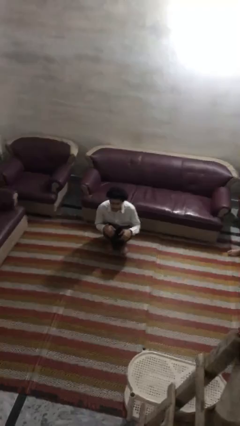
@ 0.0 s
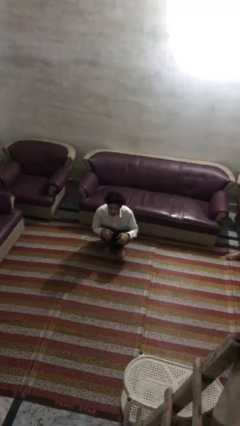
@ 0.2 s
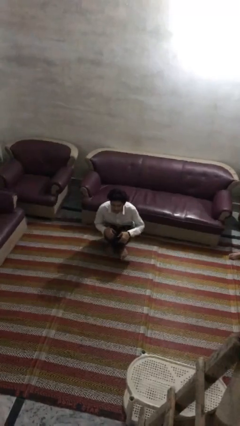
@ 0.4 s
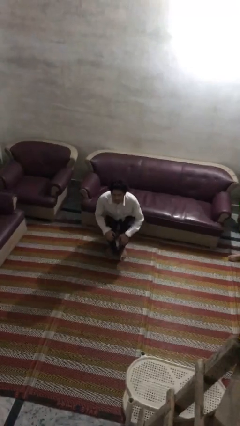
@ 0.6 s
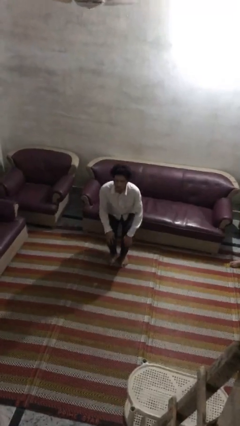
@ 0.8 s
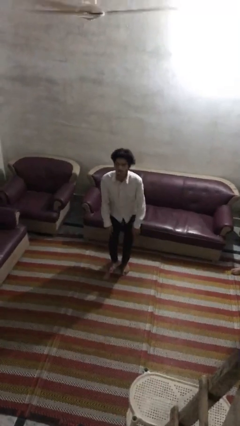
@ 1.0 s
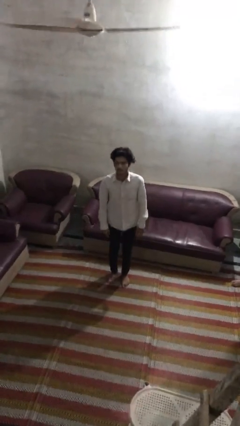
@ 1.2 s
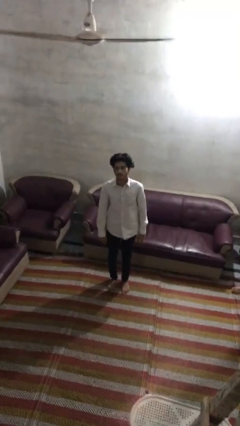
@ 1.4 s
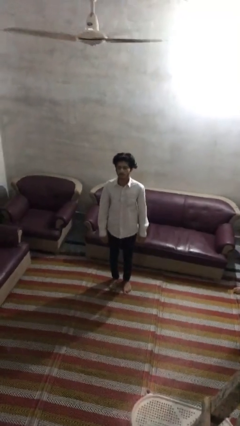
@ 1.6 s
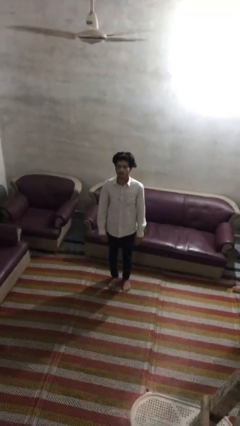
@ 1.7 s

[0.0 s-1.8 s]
person stands up

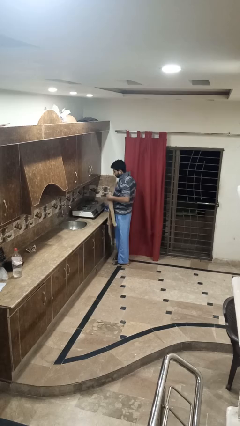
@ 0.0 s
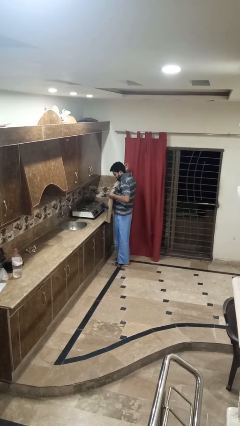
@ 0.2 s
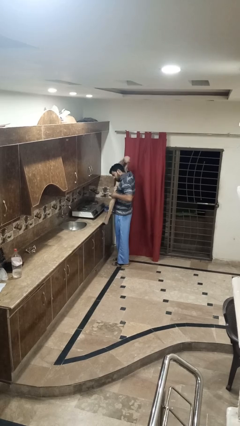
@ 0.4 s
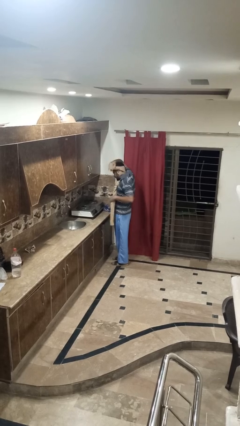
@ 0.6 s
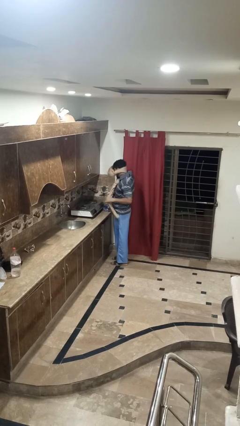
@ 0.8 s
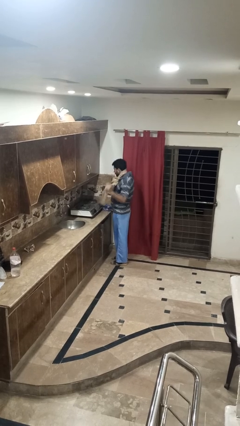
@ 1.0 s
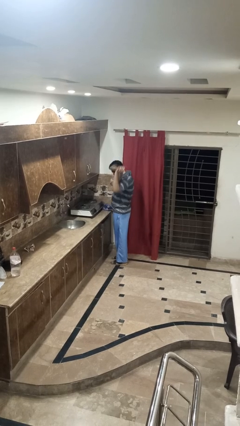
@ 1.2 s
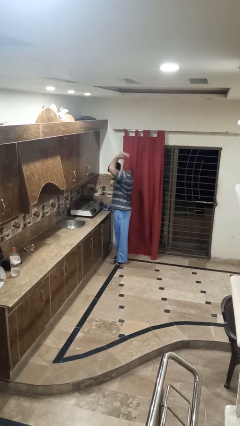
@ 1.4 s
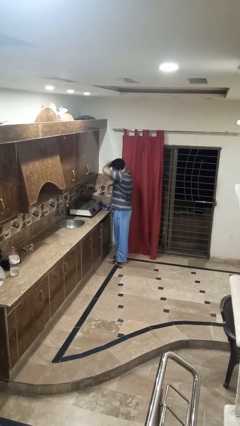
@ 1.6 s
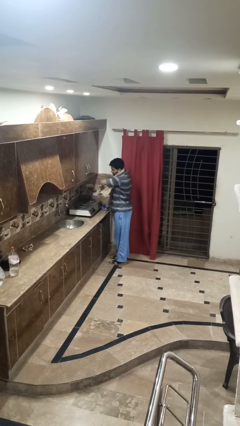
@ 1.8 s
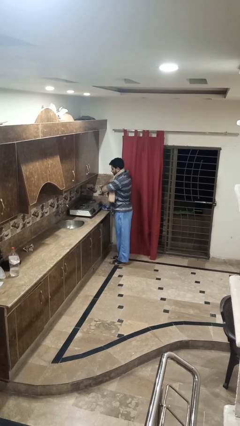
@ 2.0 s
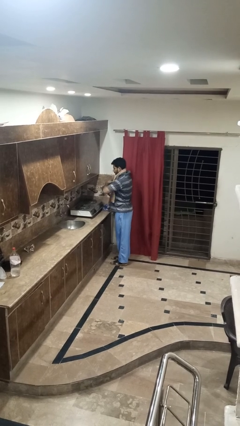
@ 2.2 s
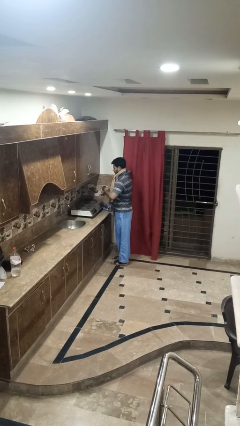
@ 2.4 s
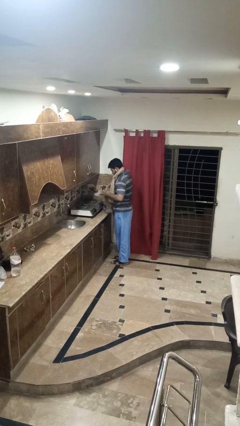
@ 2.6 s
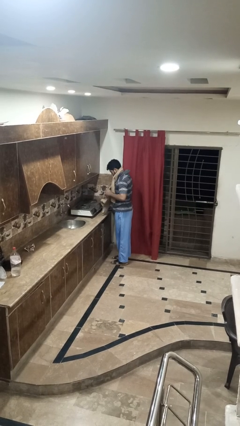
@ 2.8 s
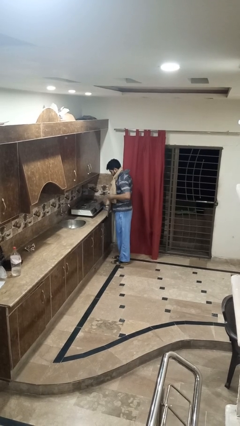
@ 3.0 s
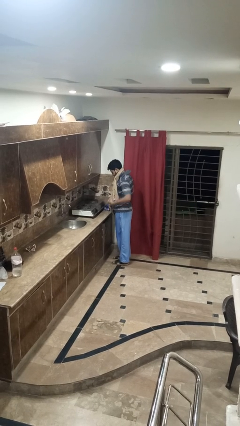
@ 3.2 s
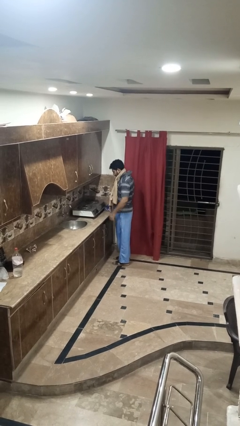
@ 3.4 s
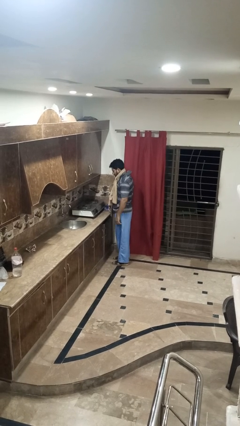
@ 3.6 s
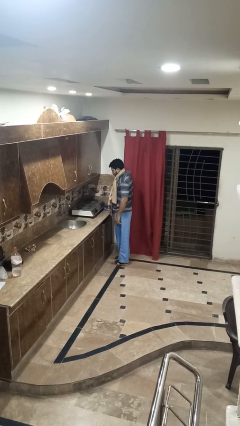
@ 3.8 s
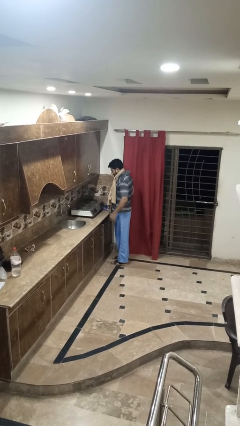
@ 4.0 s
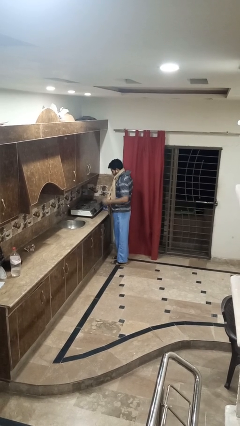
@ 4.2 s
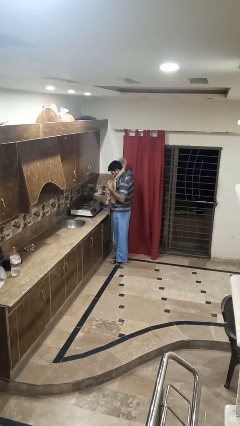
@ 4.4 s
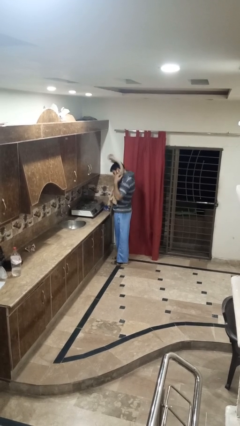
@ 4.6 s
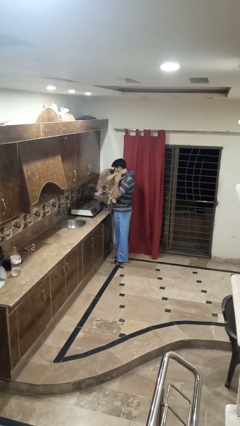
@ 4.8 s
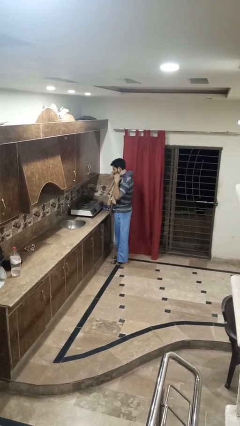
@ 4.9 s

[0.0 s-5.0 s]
person puts on apron

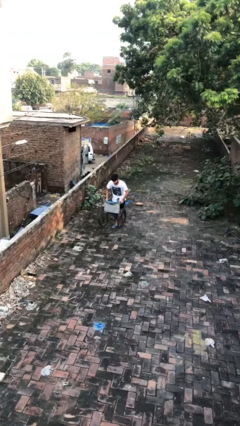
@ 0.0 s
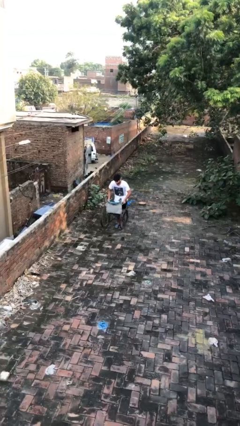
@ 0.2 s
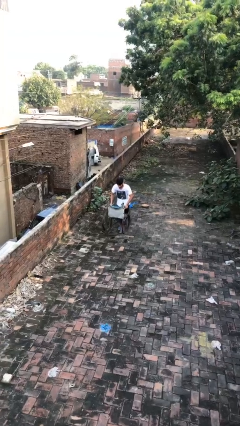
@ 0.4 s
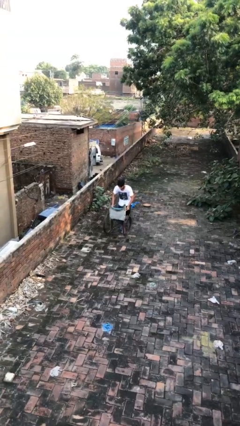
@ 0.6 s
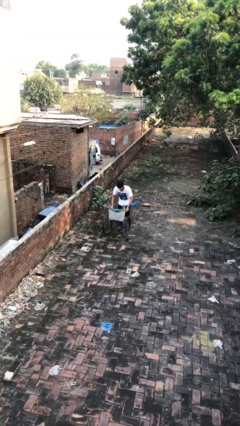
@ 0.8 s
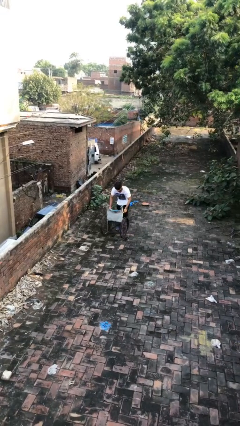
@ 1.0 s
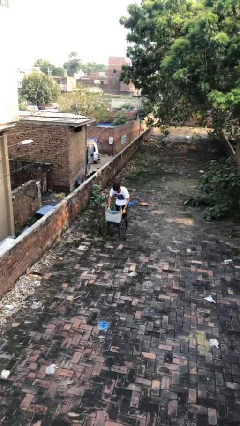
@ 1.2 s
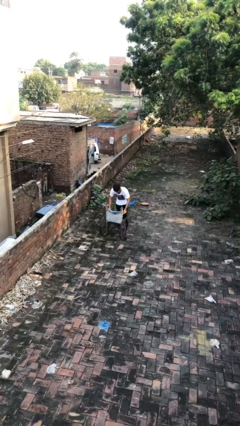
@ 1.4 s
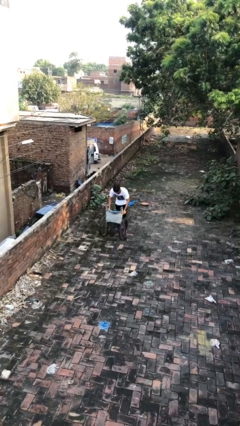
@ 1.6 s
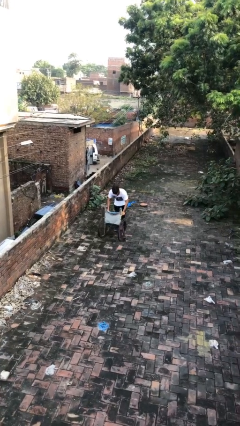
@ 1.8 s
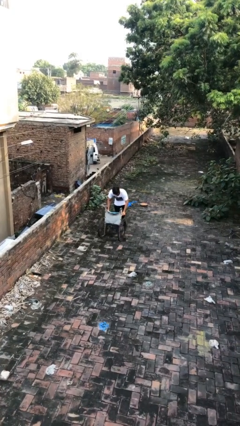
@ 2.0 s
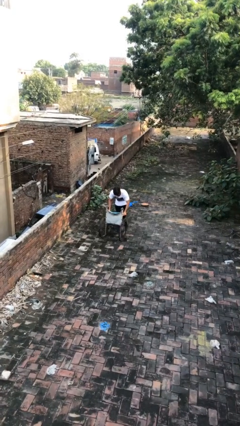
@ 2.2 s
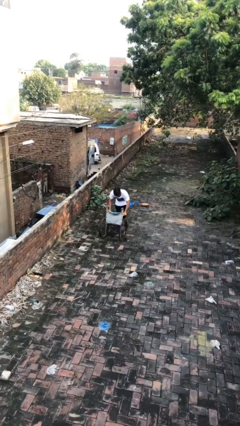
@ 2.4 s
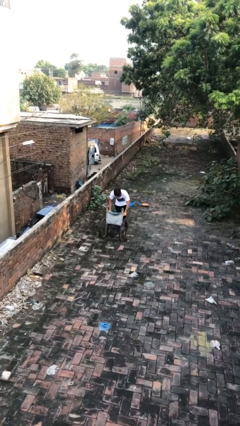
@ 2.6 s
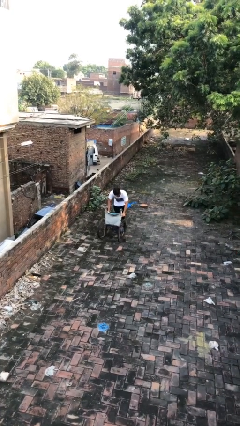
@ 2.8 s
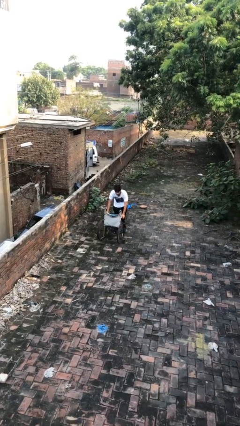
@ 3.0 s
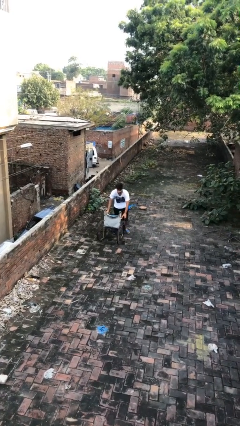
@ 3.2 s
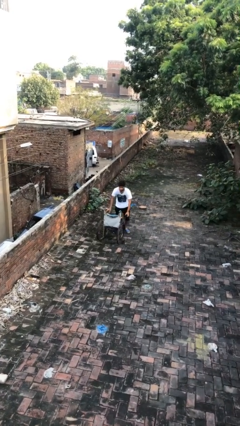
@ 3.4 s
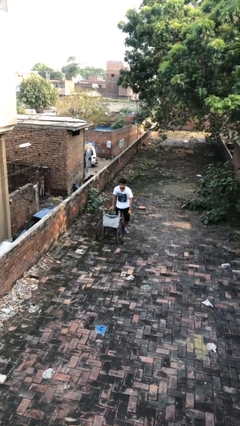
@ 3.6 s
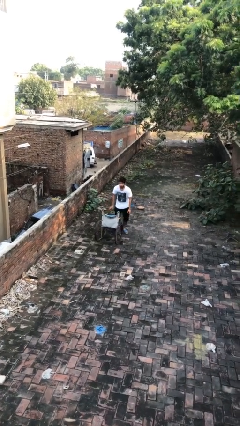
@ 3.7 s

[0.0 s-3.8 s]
person puts down object on floor

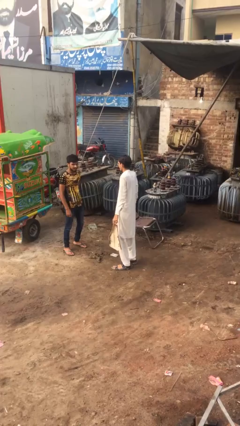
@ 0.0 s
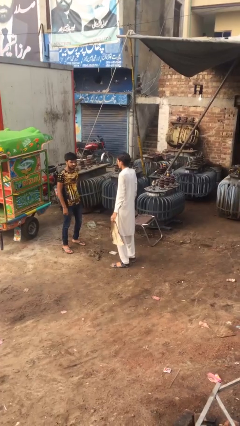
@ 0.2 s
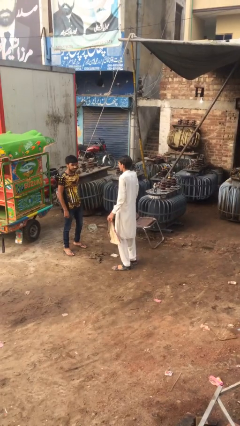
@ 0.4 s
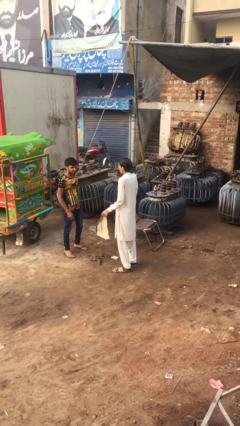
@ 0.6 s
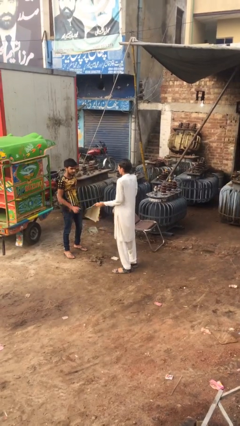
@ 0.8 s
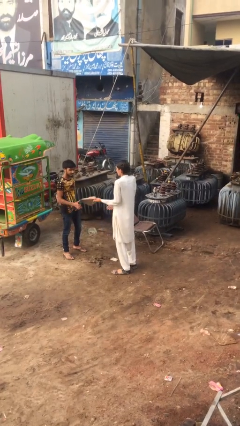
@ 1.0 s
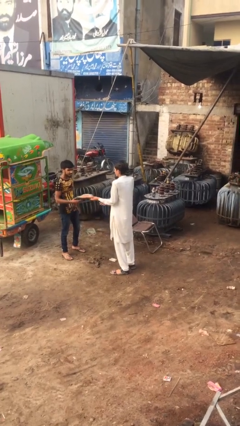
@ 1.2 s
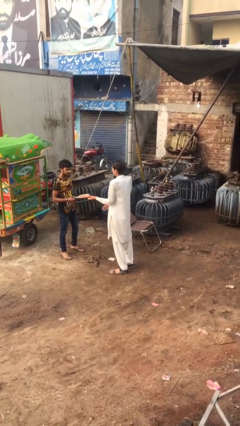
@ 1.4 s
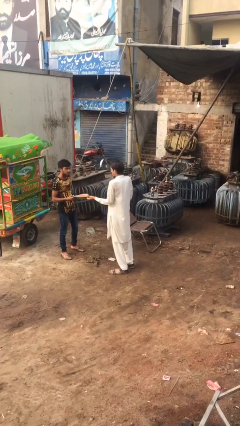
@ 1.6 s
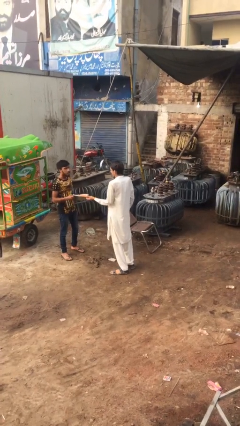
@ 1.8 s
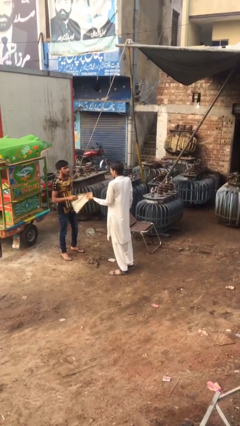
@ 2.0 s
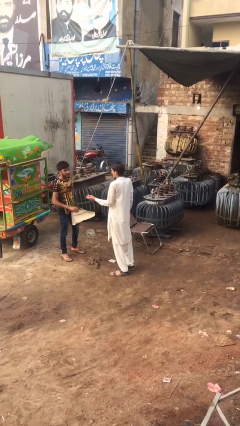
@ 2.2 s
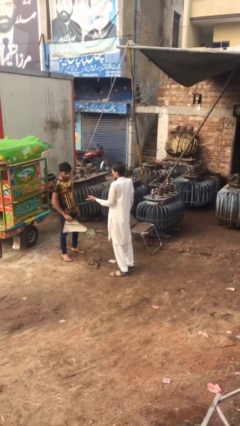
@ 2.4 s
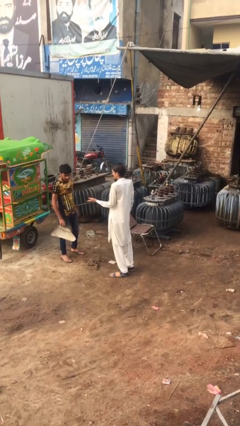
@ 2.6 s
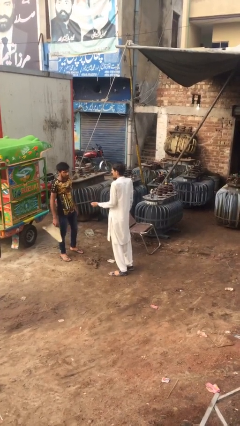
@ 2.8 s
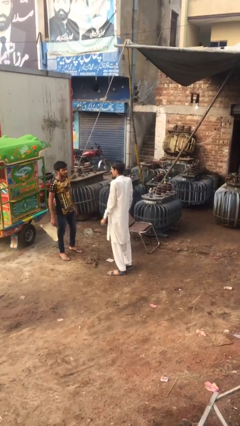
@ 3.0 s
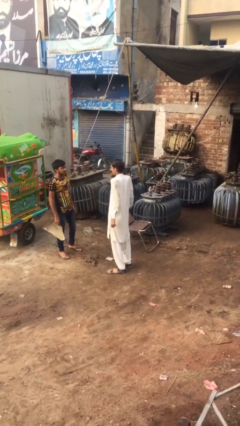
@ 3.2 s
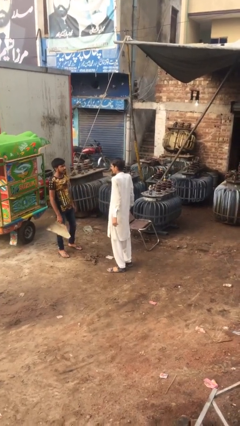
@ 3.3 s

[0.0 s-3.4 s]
person transfers object to person

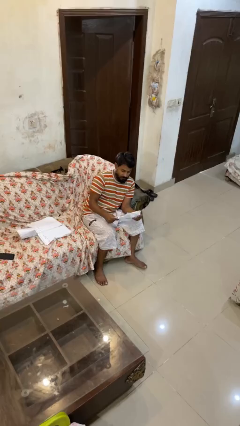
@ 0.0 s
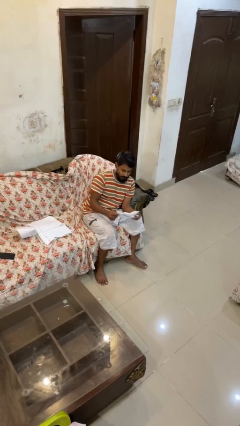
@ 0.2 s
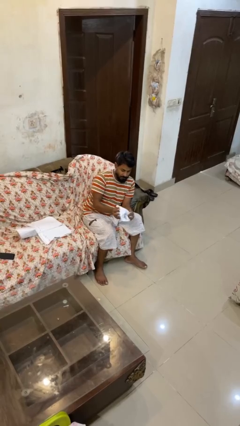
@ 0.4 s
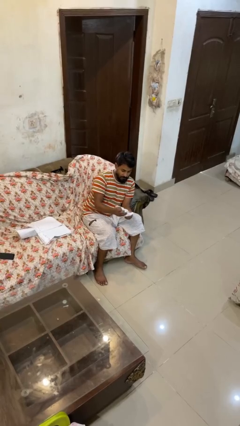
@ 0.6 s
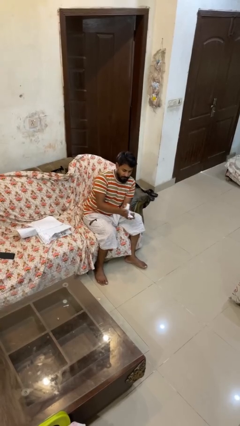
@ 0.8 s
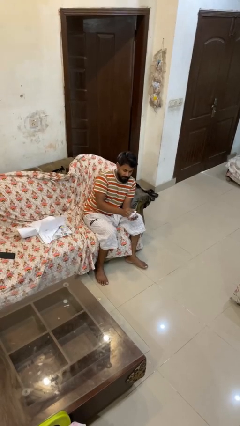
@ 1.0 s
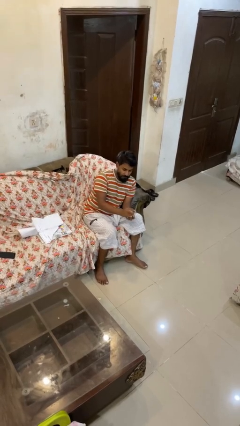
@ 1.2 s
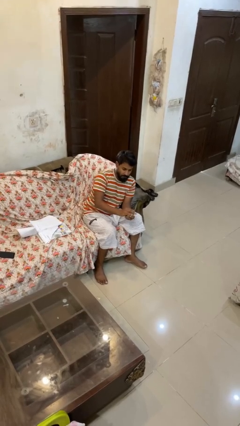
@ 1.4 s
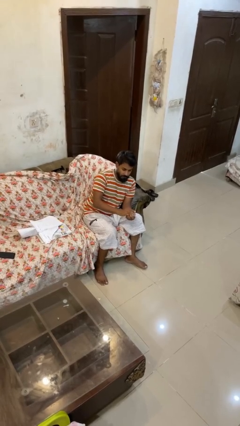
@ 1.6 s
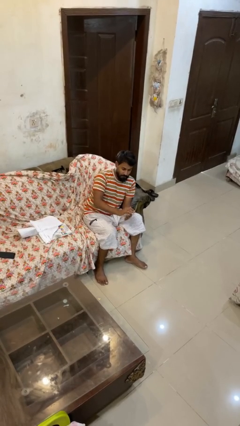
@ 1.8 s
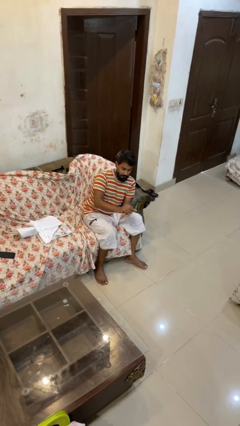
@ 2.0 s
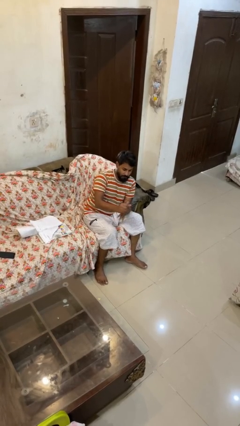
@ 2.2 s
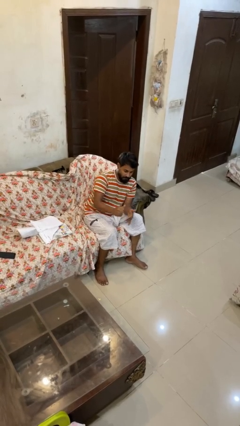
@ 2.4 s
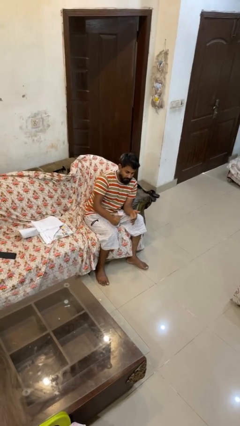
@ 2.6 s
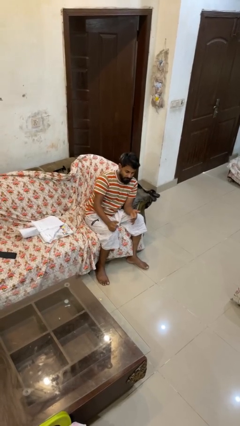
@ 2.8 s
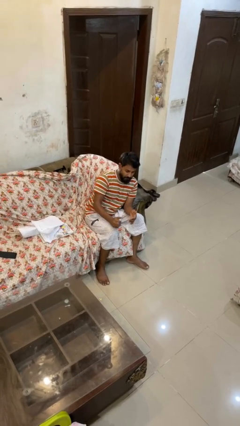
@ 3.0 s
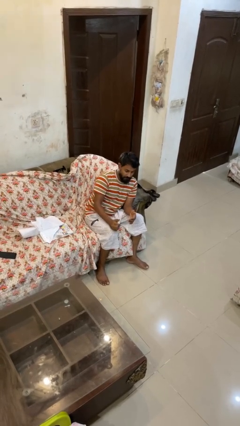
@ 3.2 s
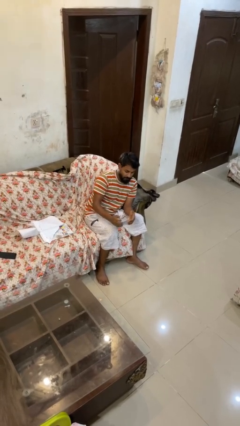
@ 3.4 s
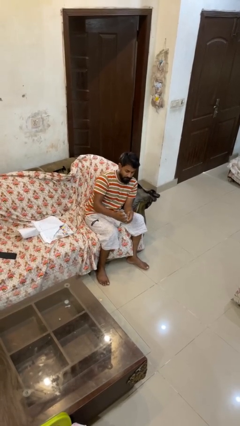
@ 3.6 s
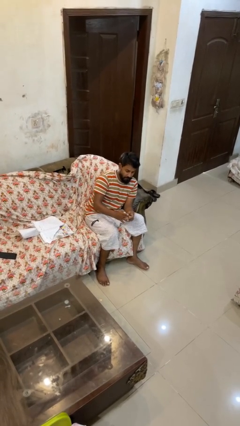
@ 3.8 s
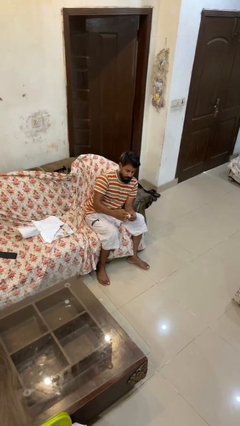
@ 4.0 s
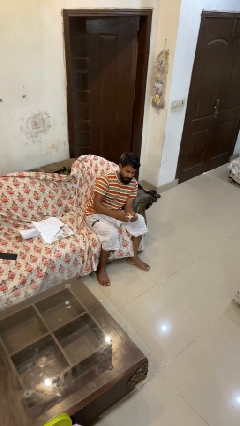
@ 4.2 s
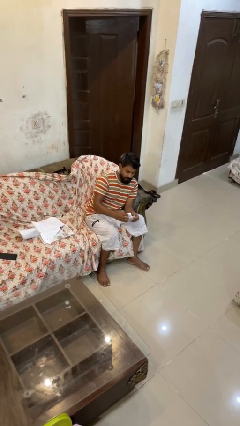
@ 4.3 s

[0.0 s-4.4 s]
person crumples paper
